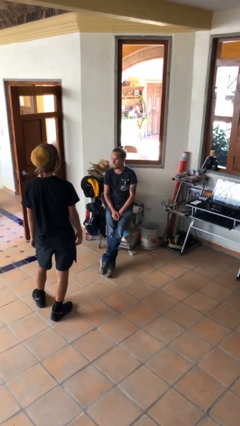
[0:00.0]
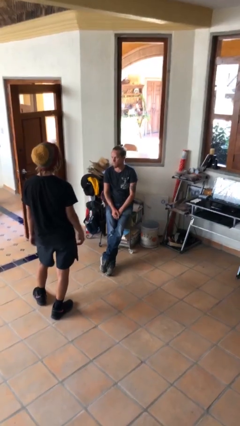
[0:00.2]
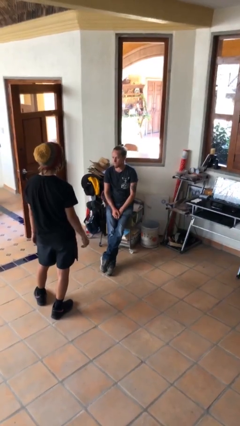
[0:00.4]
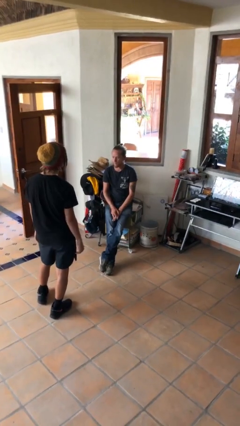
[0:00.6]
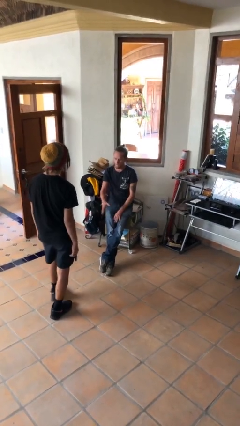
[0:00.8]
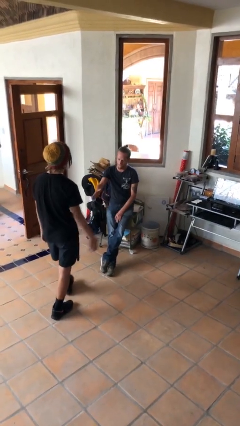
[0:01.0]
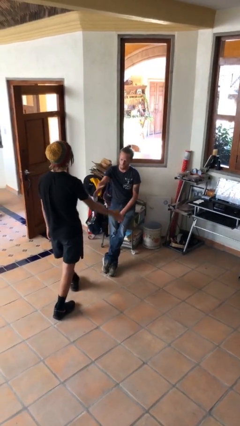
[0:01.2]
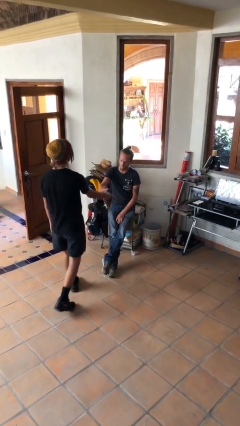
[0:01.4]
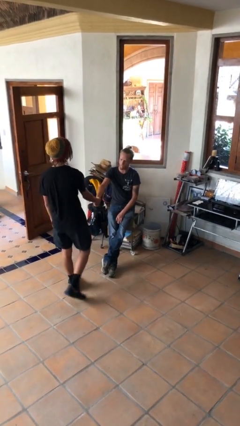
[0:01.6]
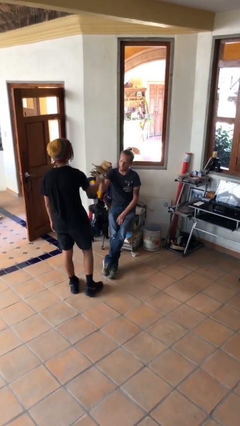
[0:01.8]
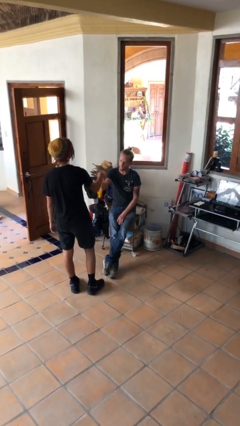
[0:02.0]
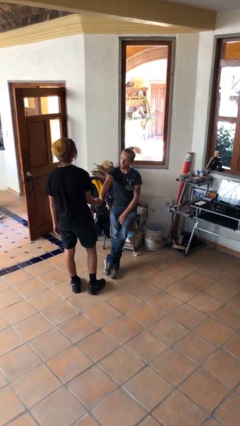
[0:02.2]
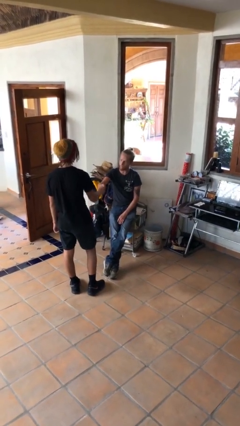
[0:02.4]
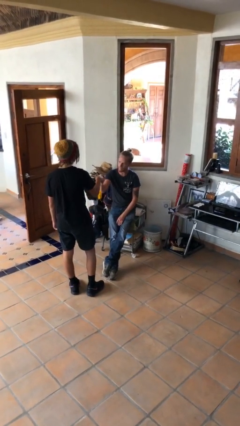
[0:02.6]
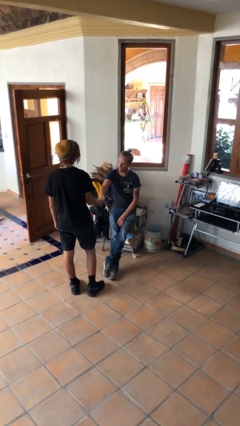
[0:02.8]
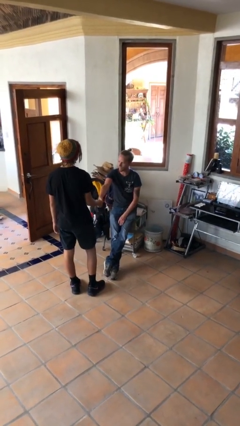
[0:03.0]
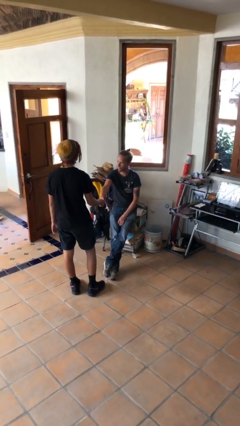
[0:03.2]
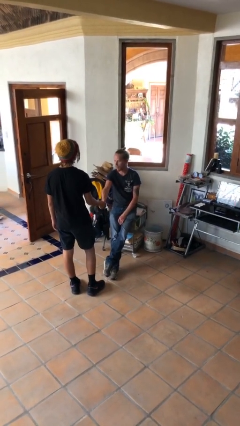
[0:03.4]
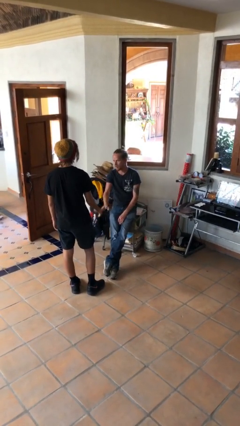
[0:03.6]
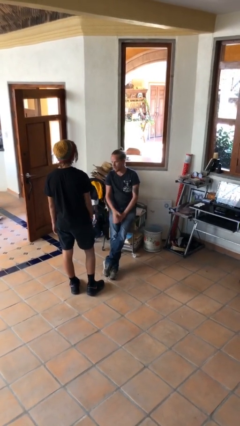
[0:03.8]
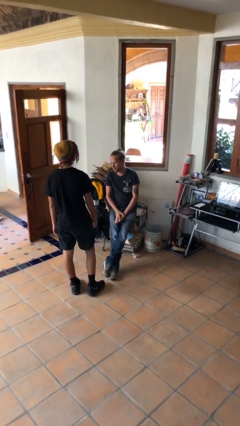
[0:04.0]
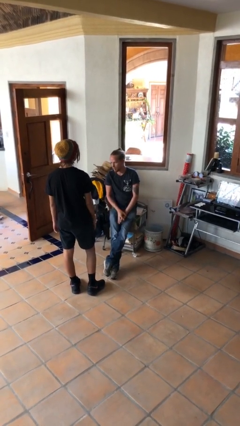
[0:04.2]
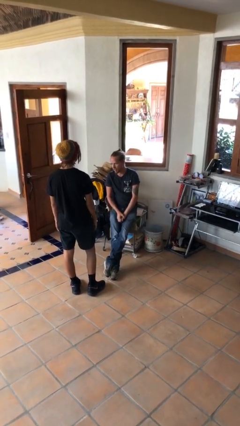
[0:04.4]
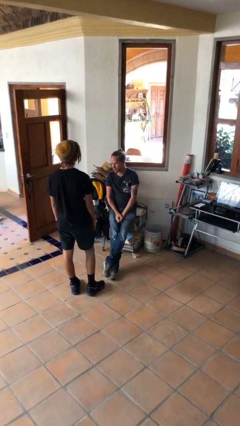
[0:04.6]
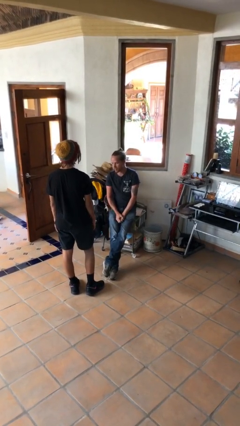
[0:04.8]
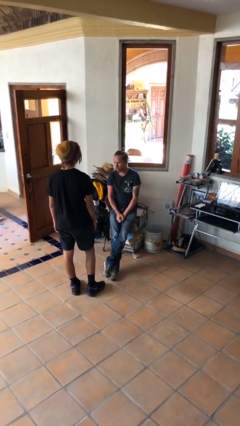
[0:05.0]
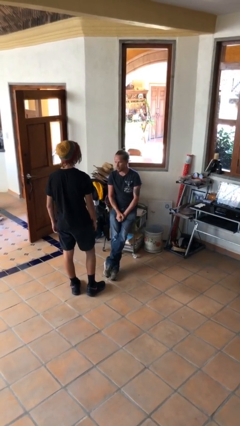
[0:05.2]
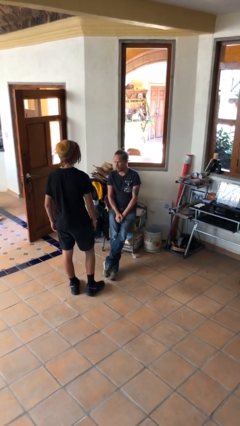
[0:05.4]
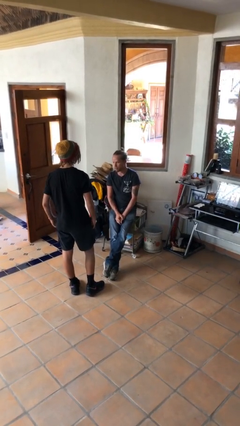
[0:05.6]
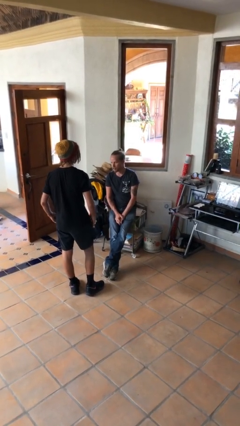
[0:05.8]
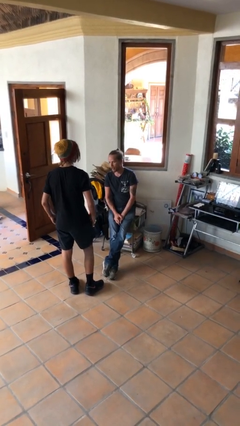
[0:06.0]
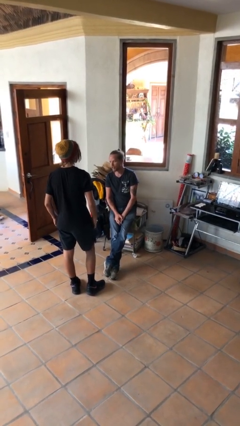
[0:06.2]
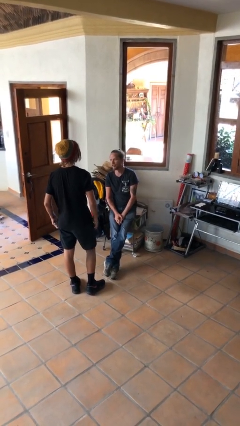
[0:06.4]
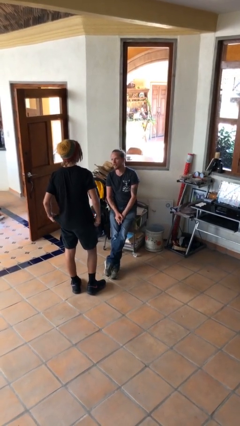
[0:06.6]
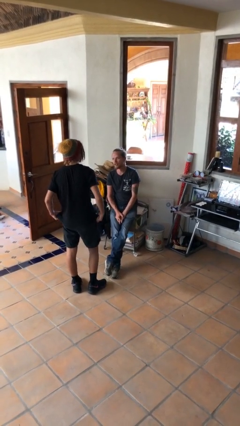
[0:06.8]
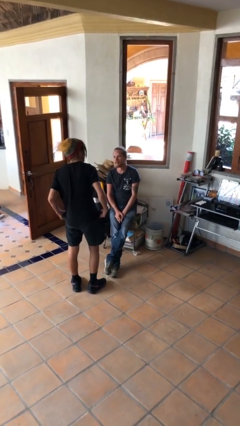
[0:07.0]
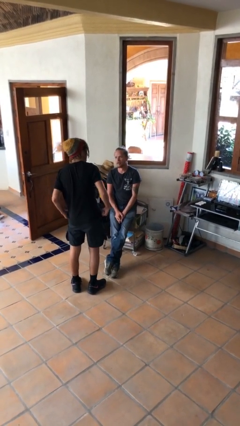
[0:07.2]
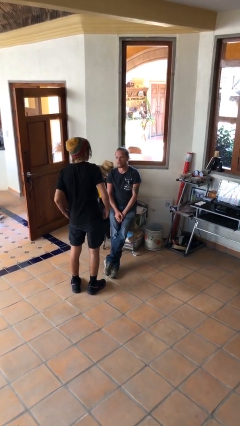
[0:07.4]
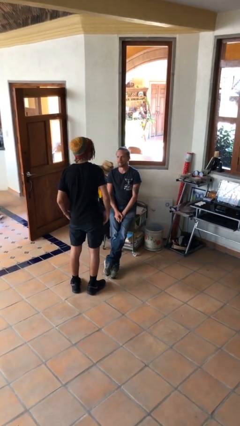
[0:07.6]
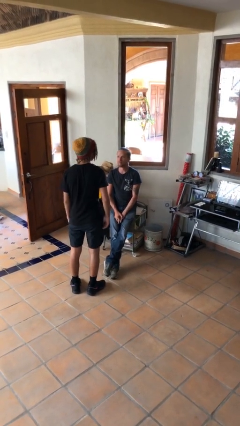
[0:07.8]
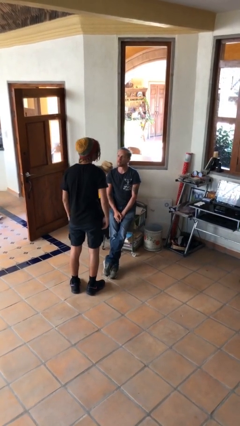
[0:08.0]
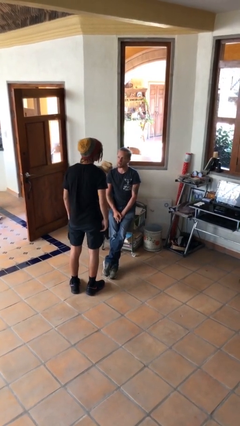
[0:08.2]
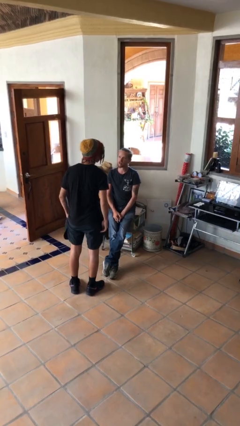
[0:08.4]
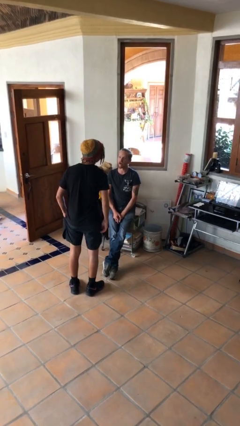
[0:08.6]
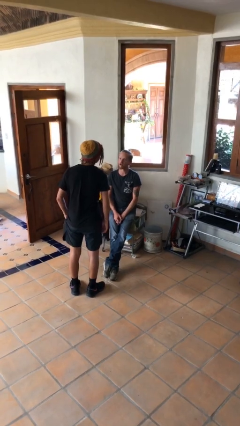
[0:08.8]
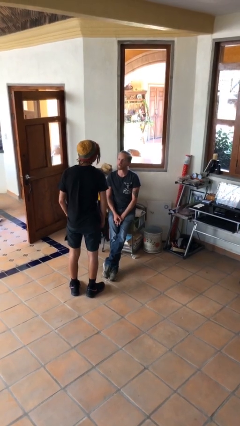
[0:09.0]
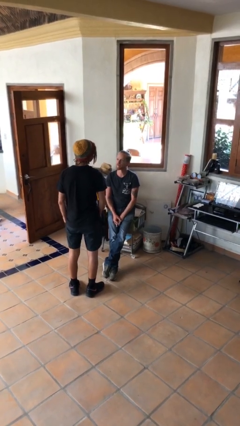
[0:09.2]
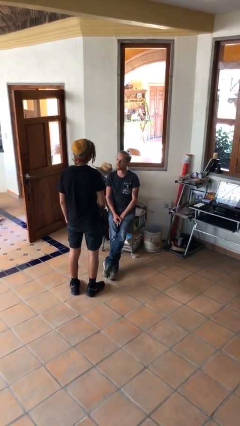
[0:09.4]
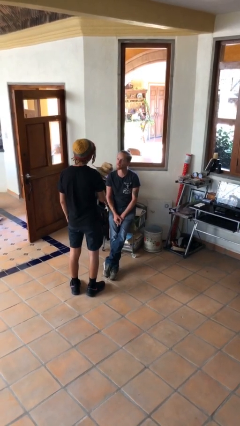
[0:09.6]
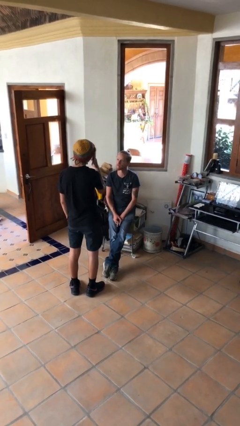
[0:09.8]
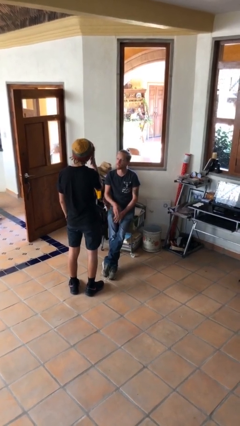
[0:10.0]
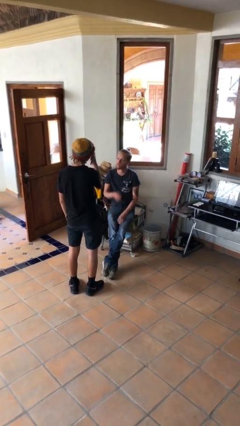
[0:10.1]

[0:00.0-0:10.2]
person shakes hand

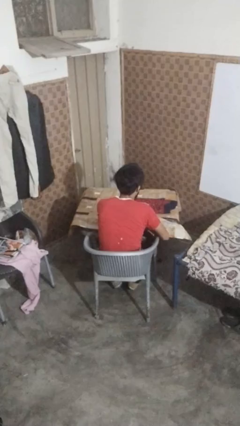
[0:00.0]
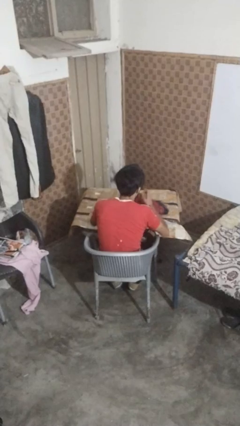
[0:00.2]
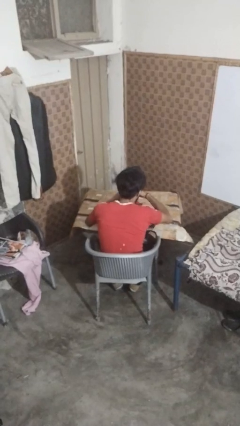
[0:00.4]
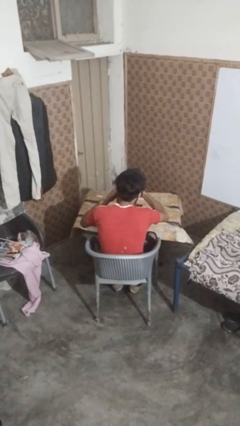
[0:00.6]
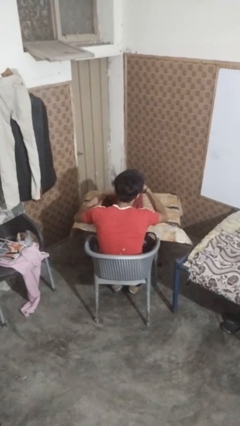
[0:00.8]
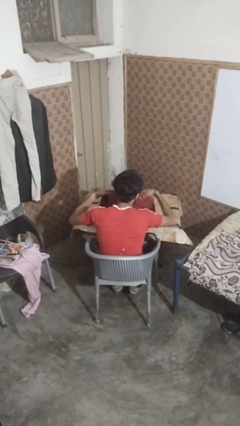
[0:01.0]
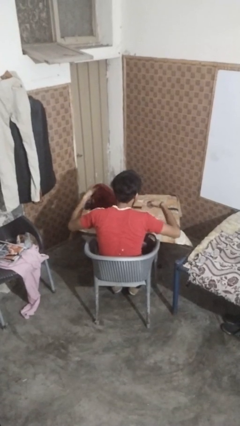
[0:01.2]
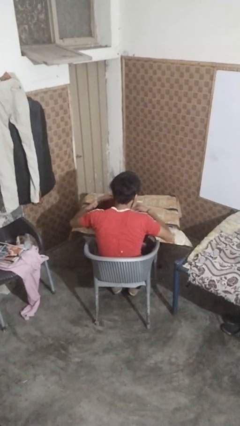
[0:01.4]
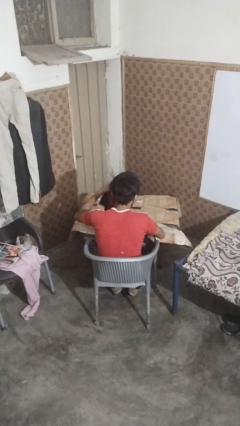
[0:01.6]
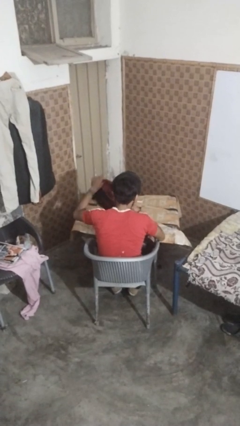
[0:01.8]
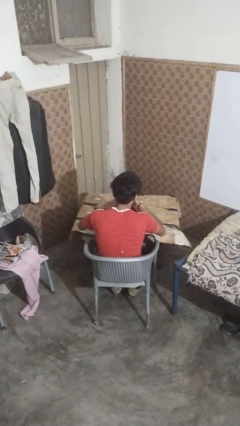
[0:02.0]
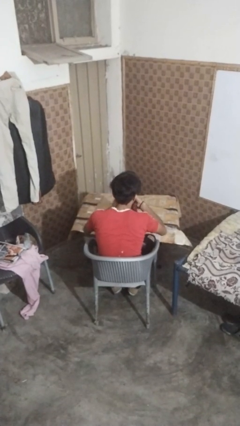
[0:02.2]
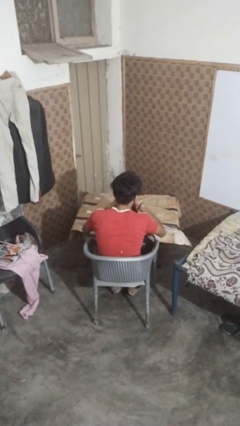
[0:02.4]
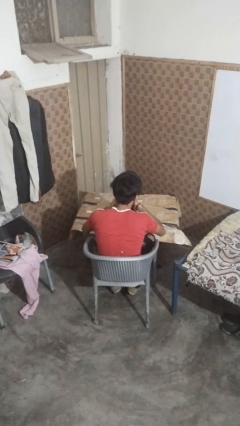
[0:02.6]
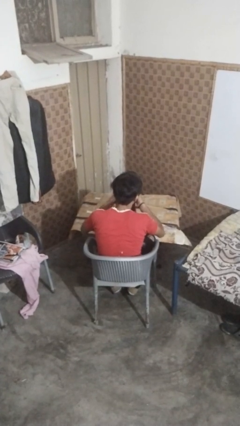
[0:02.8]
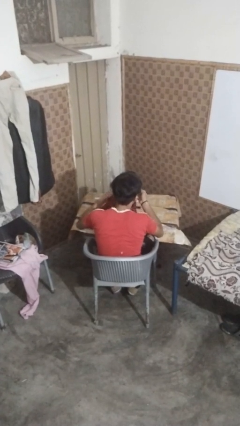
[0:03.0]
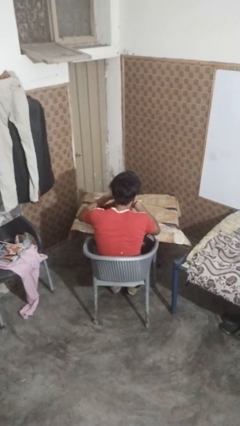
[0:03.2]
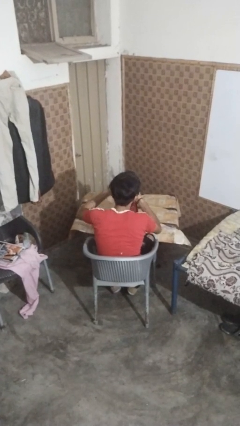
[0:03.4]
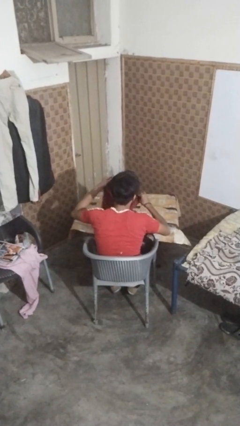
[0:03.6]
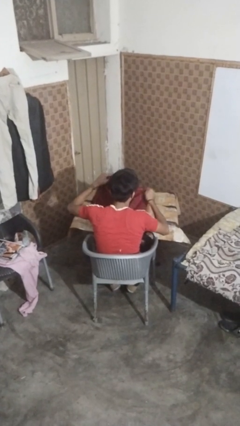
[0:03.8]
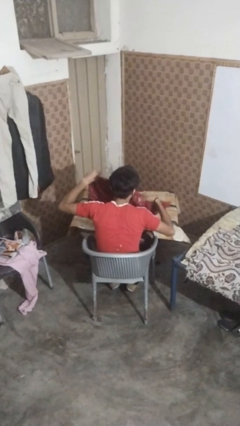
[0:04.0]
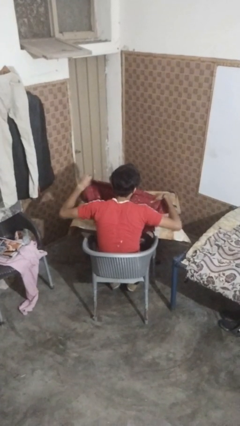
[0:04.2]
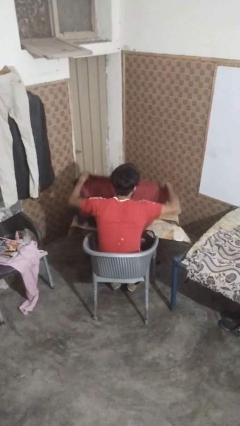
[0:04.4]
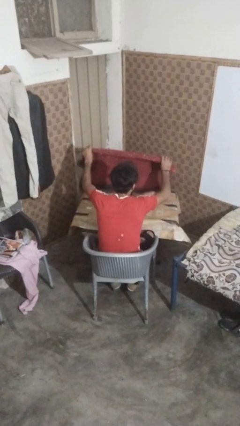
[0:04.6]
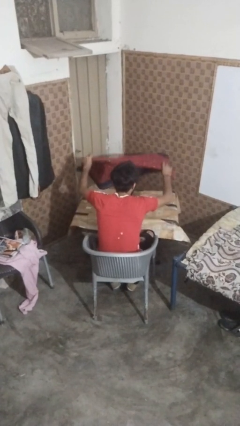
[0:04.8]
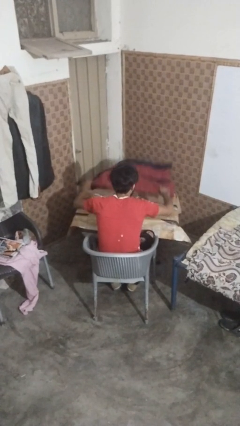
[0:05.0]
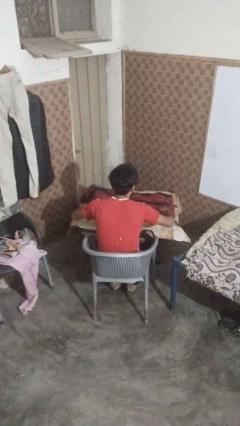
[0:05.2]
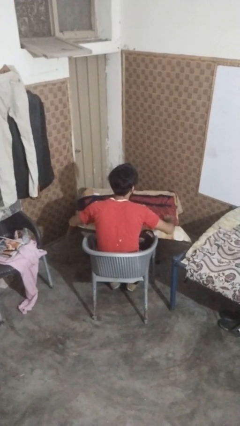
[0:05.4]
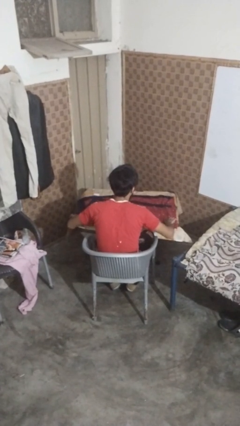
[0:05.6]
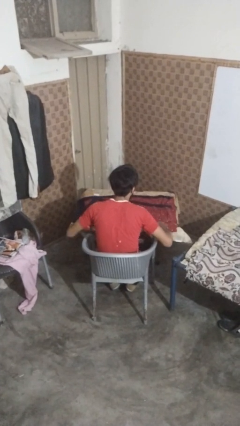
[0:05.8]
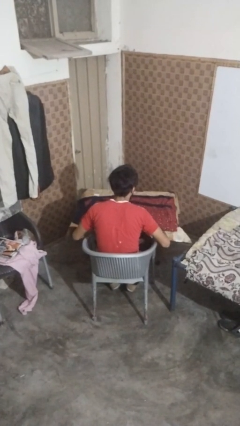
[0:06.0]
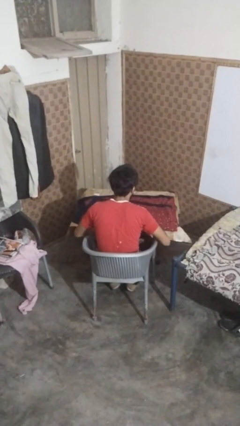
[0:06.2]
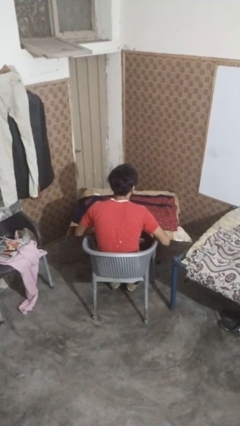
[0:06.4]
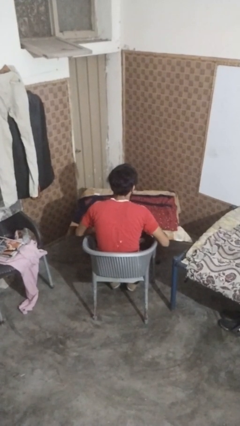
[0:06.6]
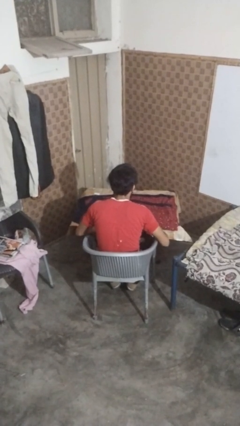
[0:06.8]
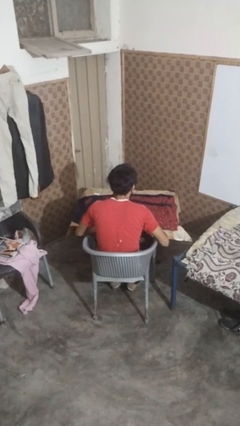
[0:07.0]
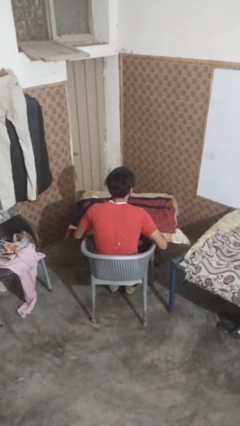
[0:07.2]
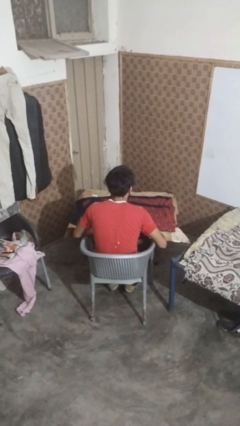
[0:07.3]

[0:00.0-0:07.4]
person spreads tablecloth

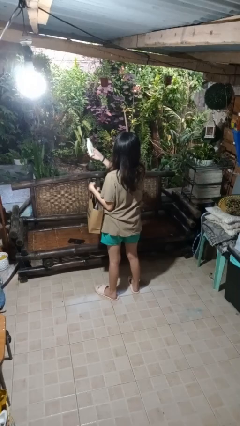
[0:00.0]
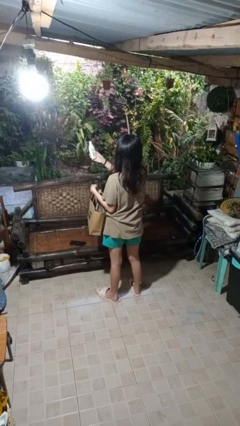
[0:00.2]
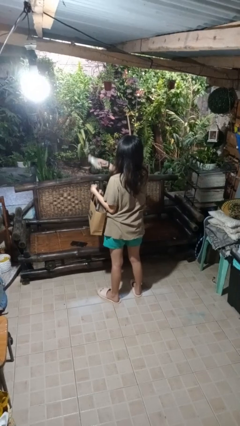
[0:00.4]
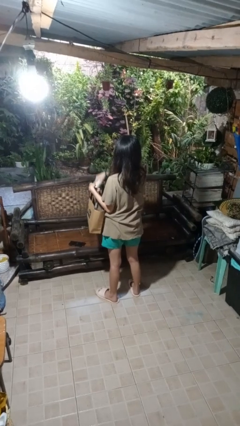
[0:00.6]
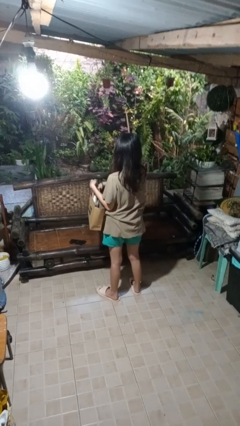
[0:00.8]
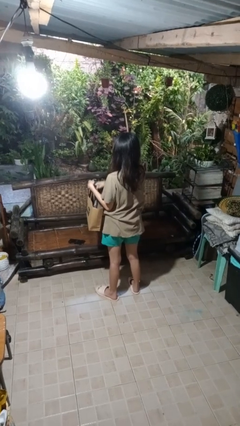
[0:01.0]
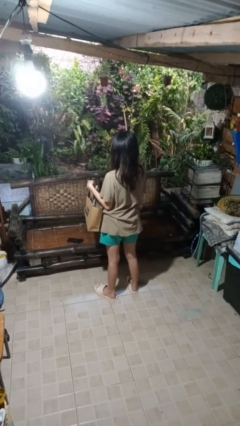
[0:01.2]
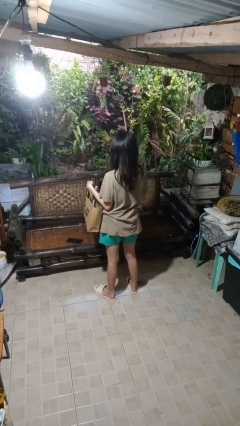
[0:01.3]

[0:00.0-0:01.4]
person puts object into bag
